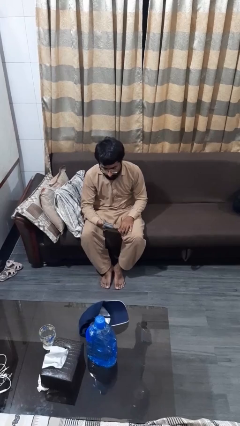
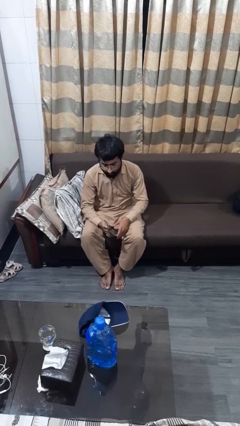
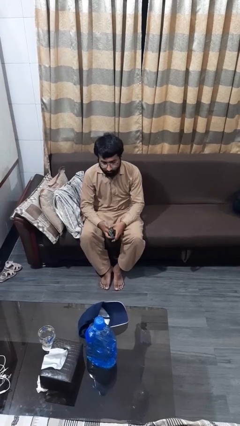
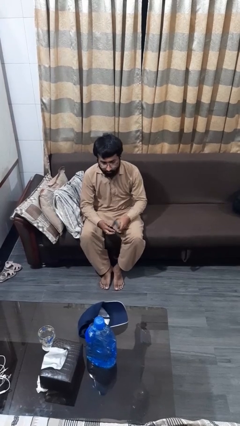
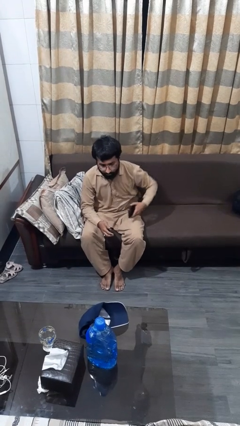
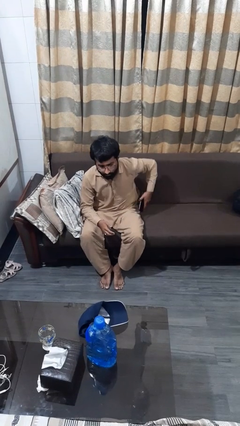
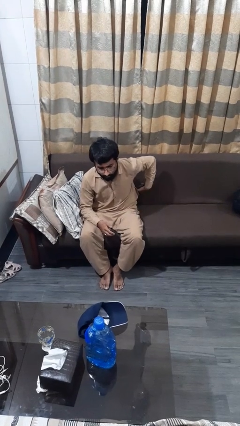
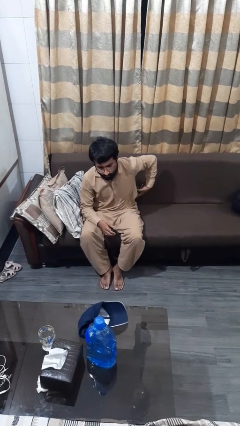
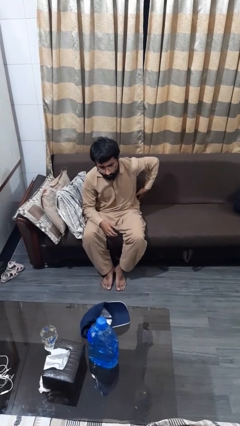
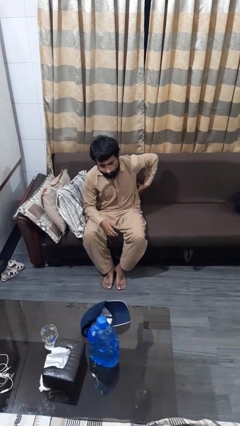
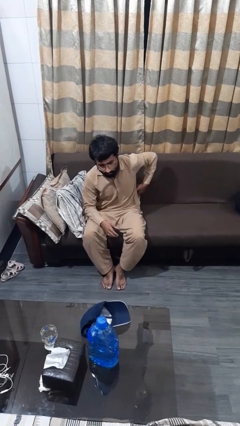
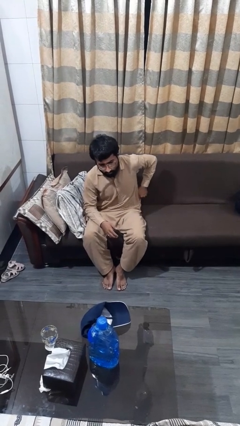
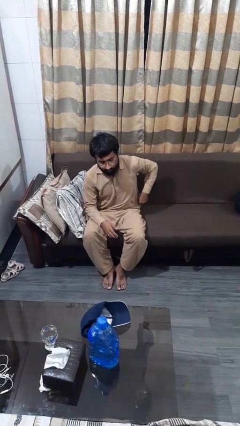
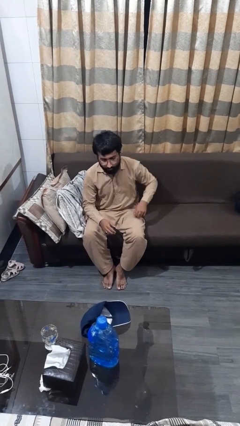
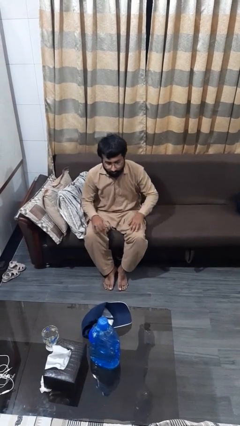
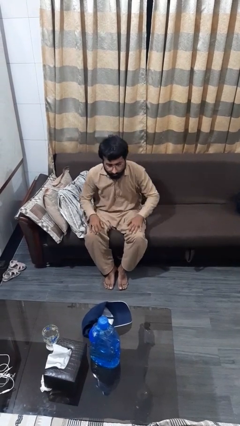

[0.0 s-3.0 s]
person puts phone into pocket

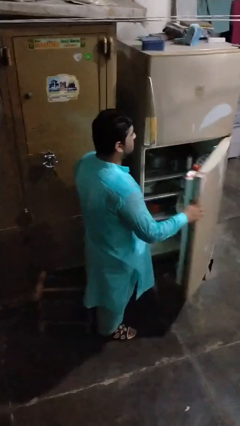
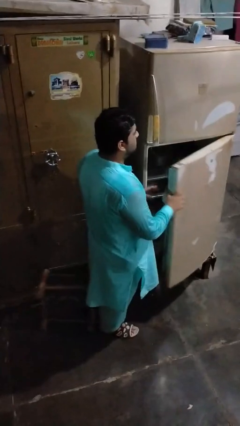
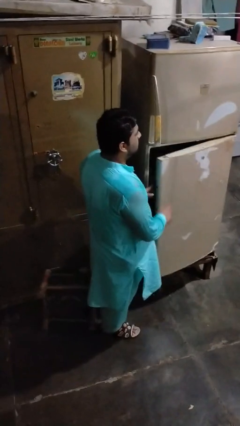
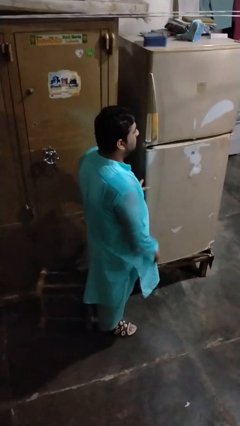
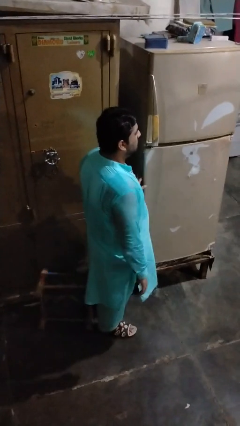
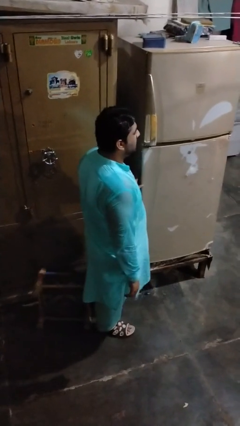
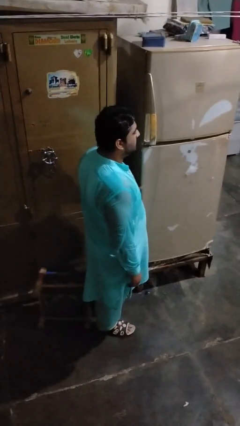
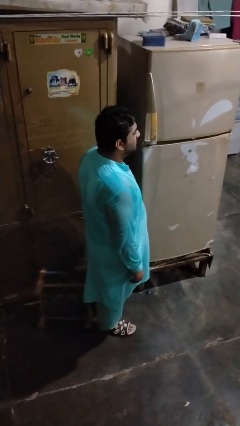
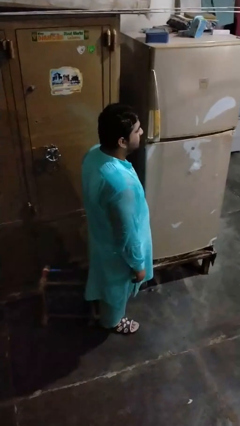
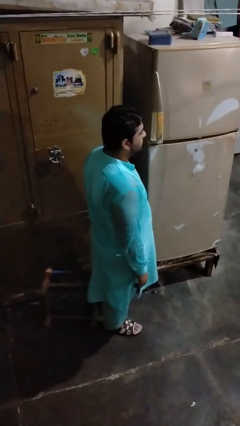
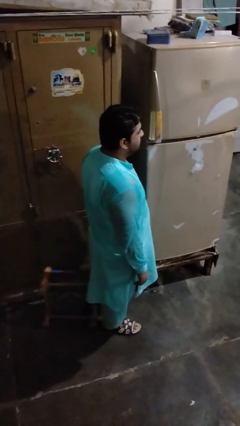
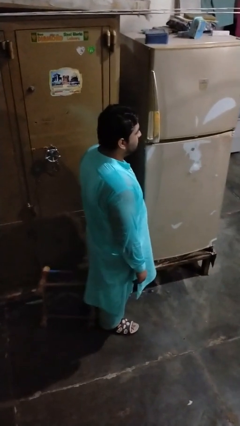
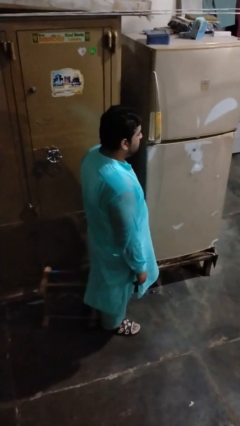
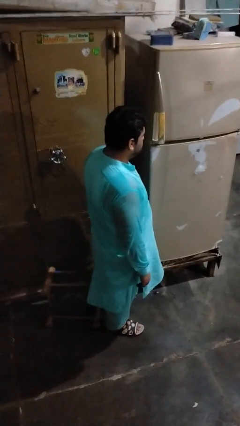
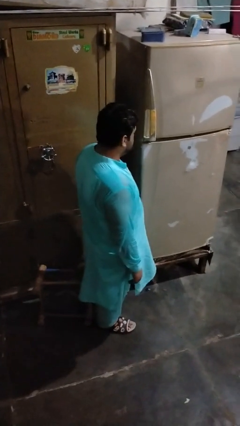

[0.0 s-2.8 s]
person closes refrigerator

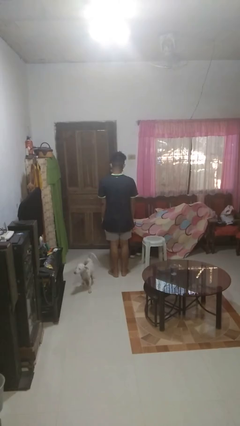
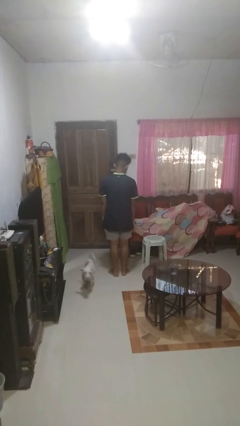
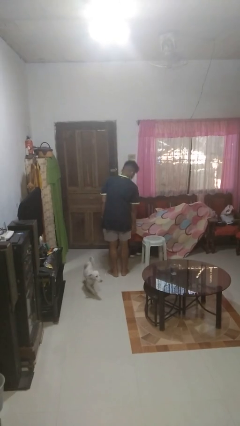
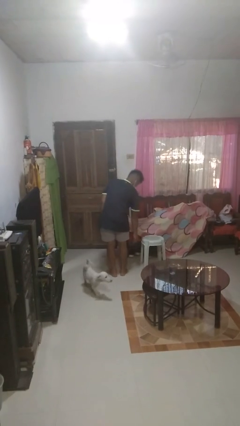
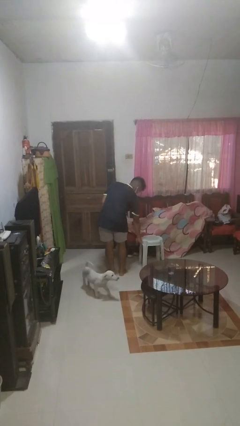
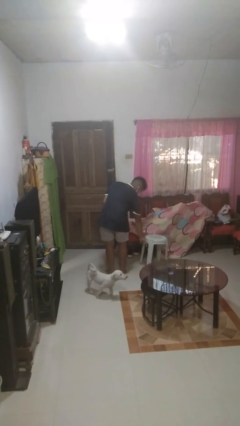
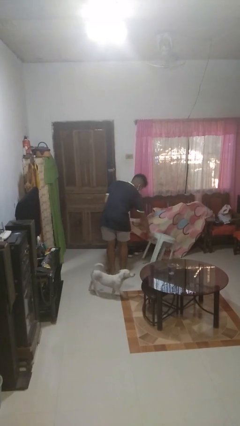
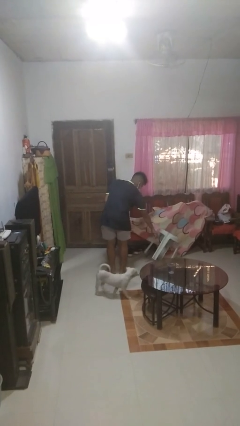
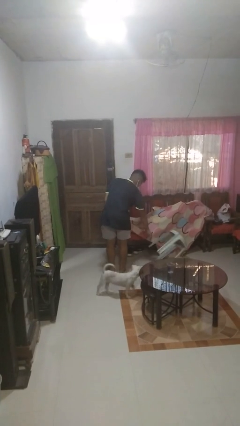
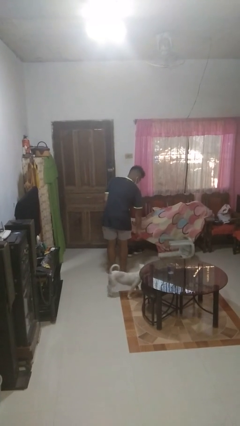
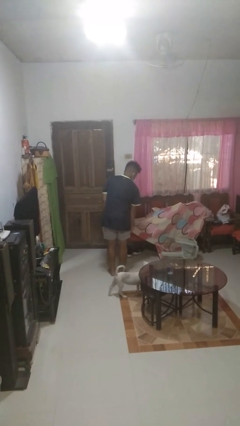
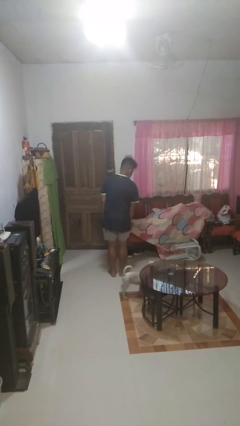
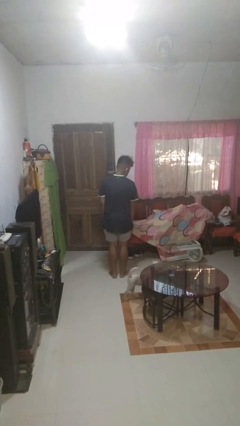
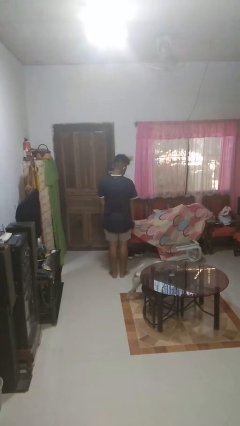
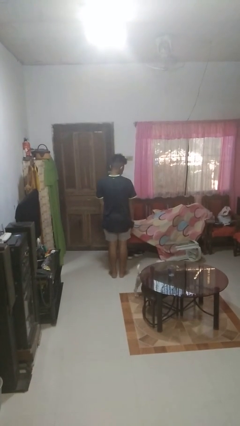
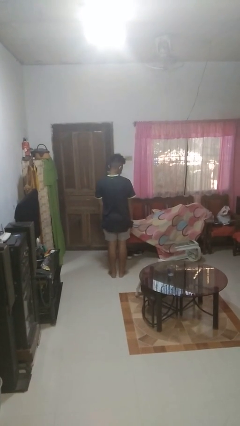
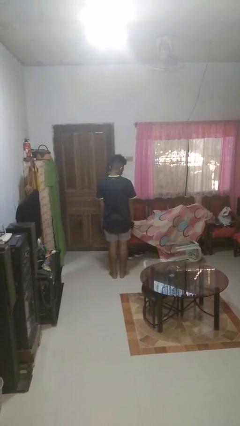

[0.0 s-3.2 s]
person knocks over furniture

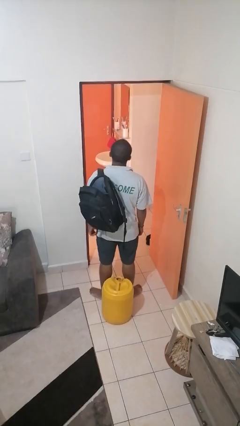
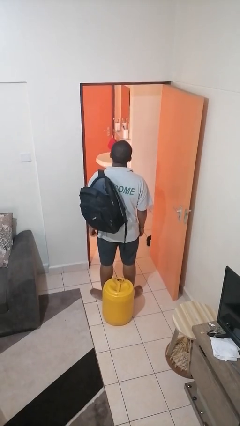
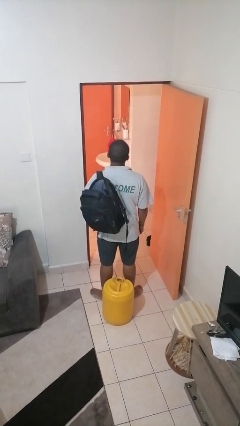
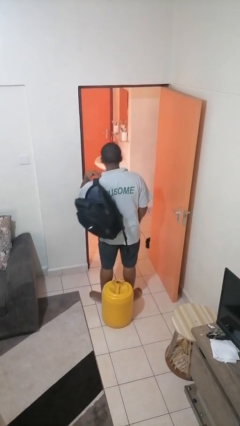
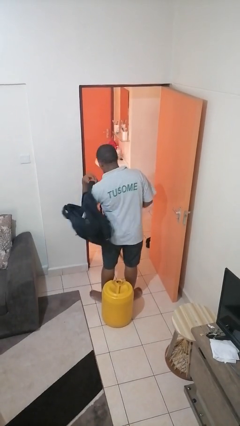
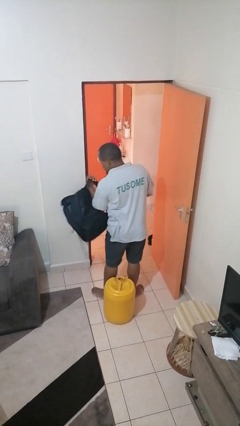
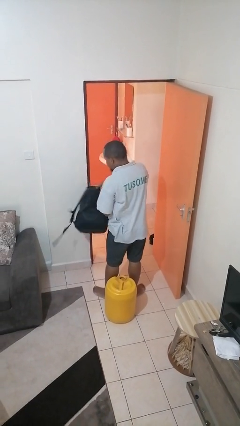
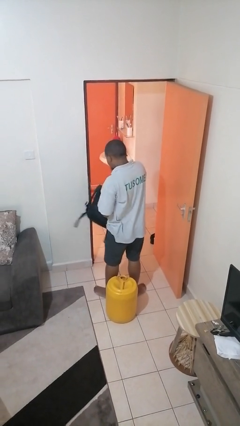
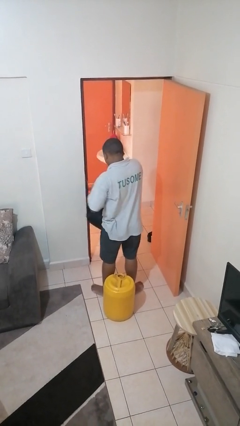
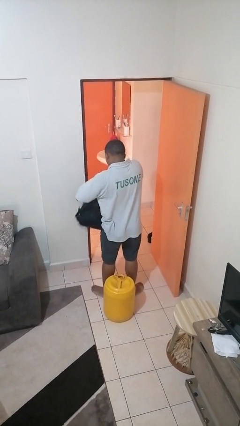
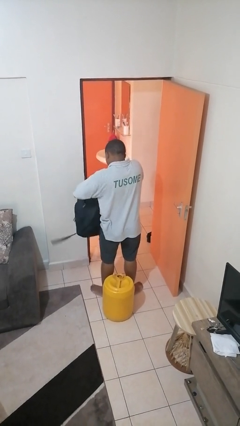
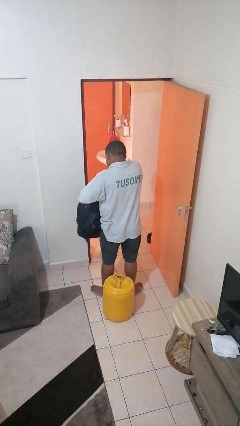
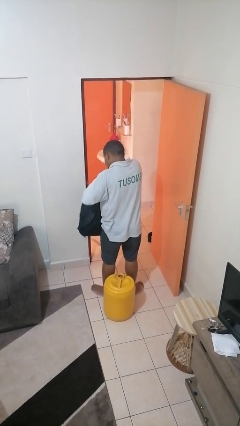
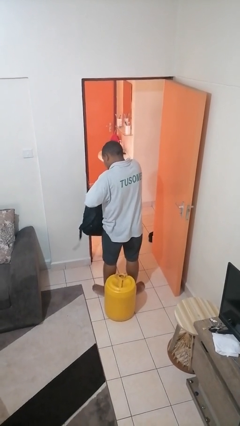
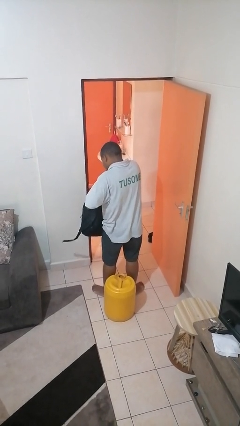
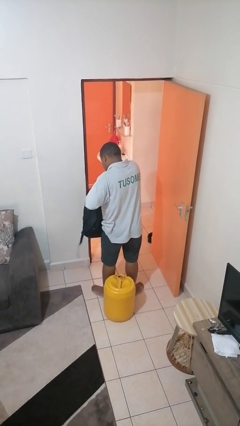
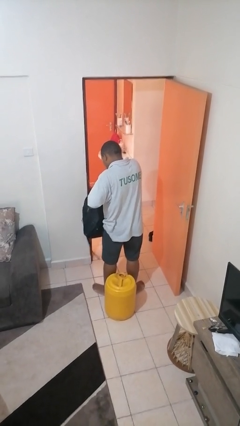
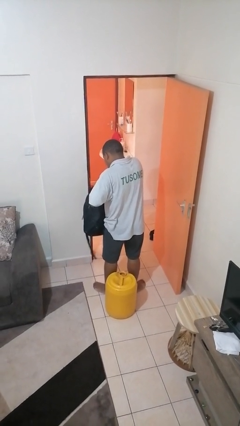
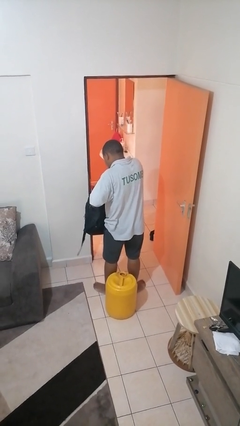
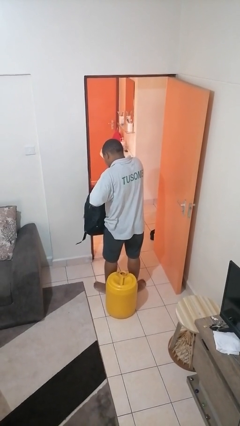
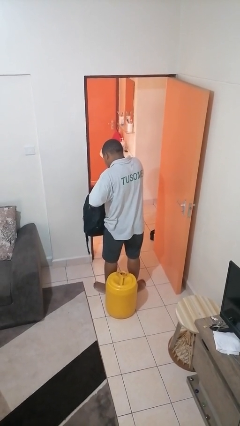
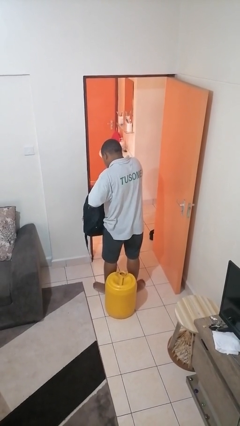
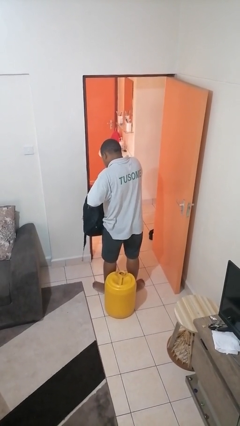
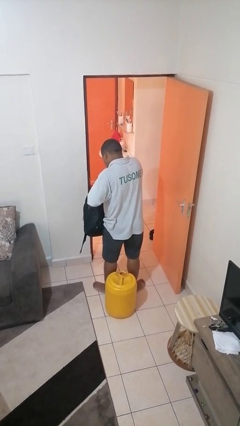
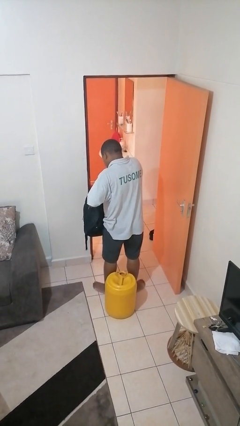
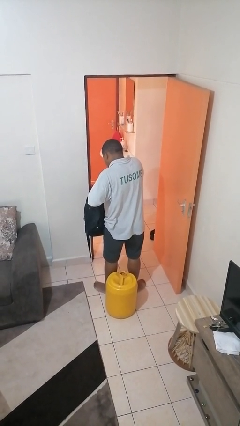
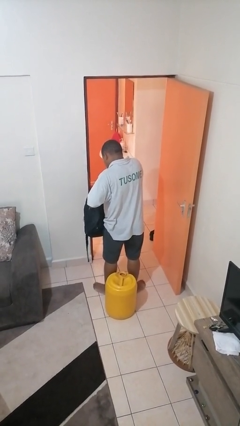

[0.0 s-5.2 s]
person searches in backpack

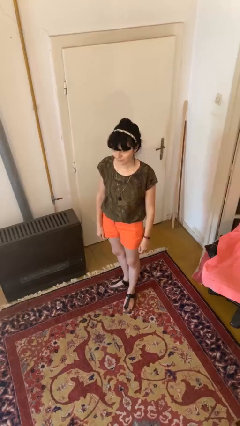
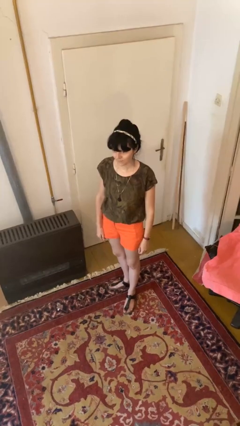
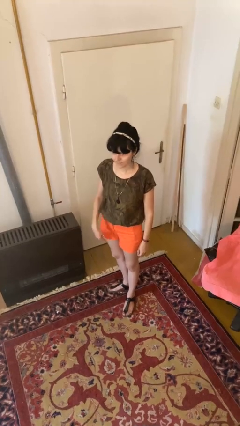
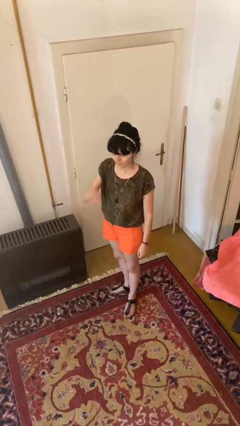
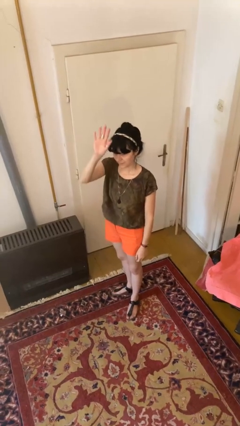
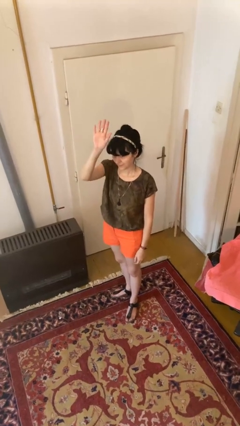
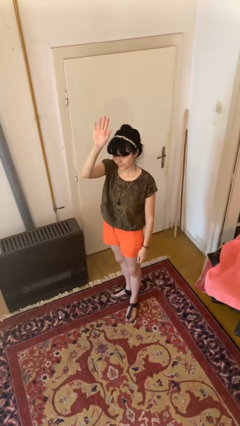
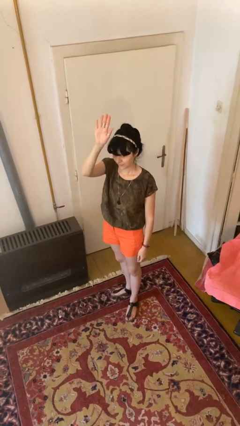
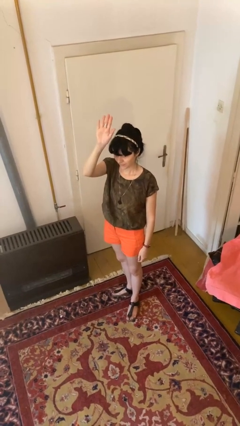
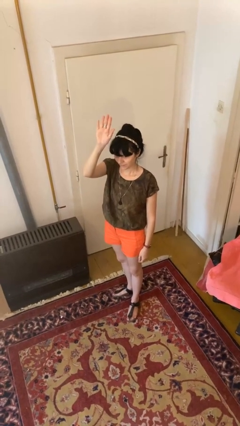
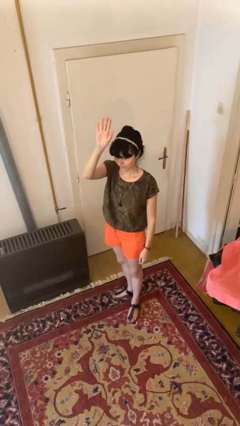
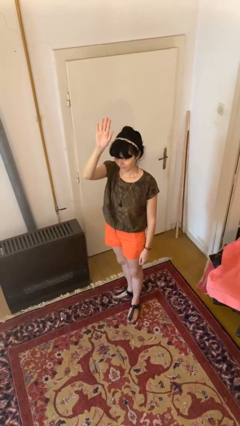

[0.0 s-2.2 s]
person gestures raise hand

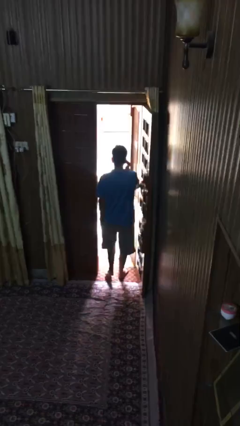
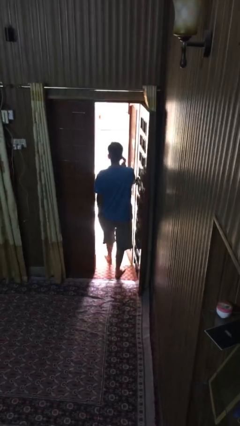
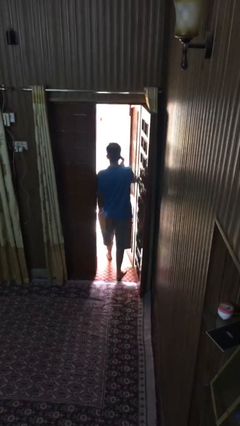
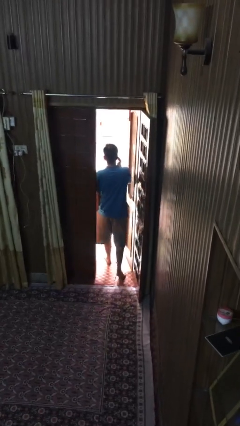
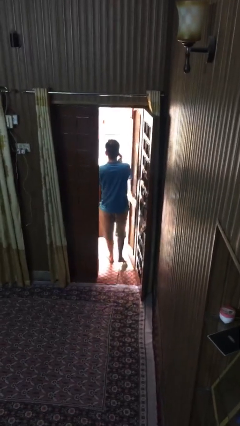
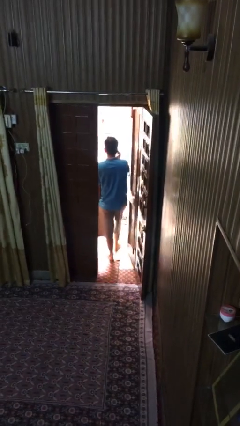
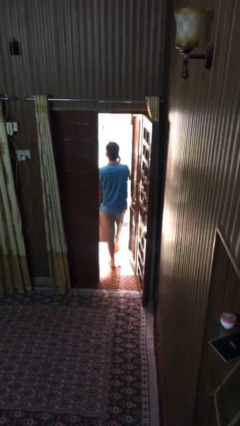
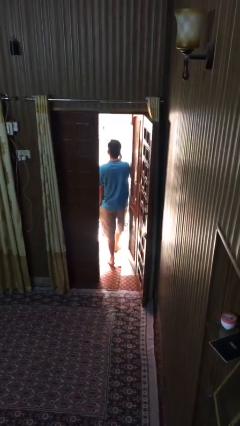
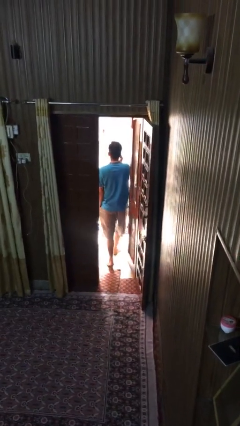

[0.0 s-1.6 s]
person exits scene through structure
